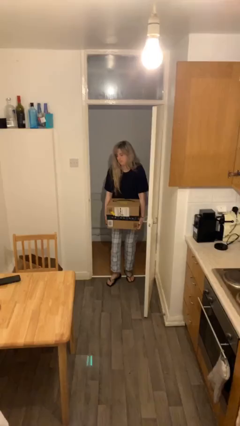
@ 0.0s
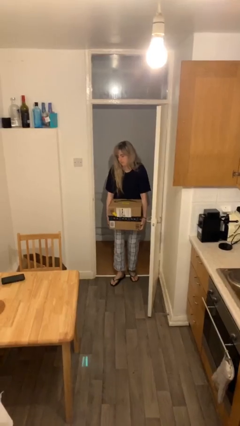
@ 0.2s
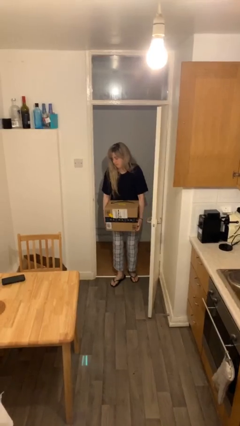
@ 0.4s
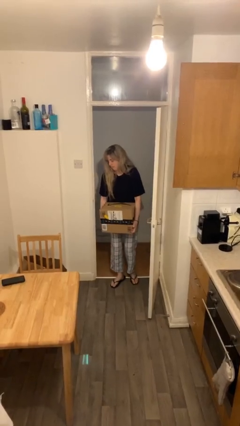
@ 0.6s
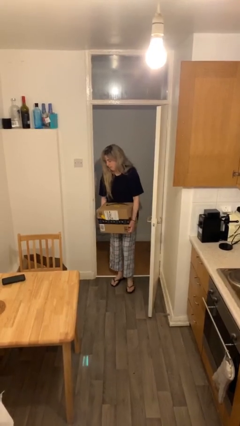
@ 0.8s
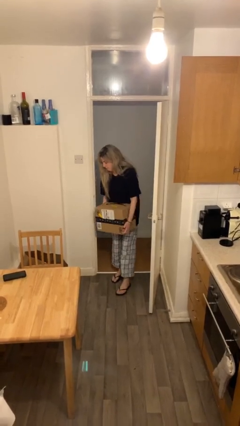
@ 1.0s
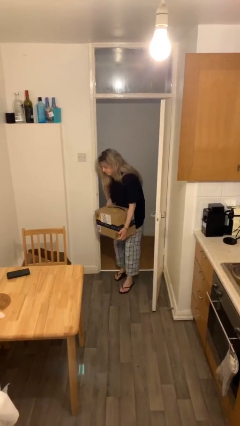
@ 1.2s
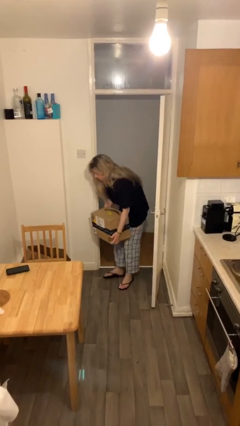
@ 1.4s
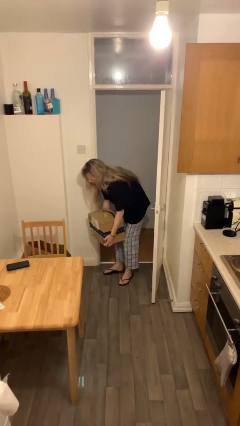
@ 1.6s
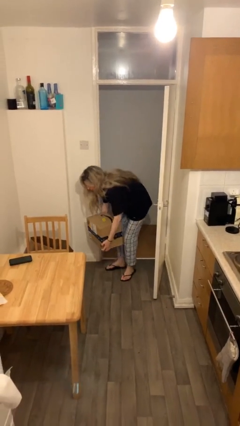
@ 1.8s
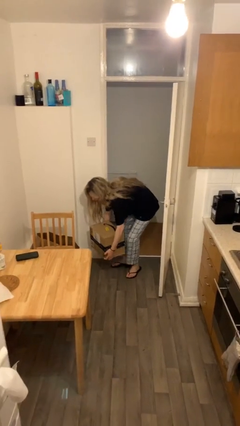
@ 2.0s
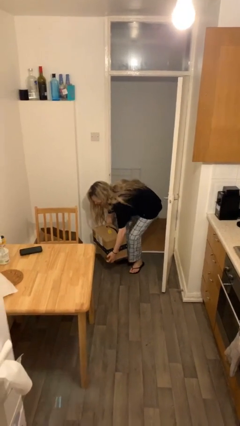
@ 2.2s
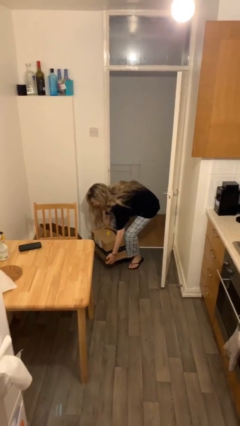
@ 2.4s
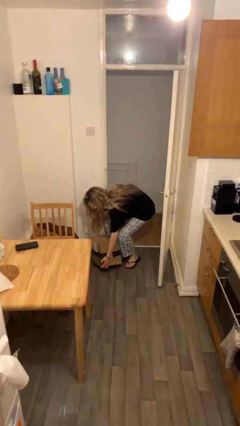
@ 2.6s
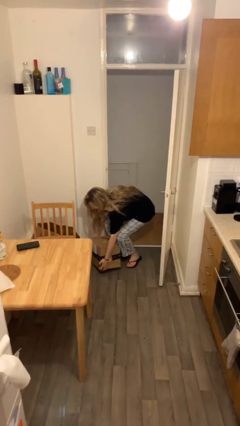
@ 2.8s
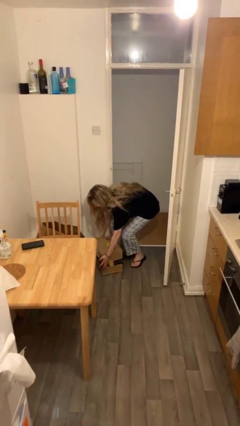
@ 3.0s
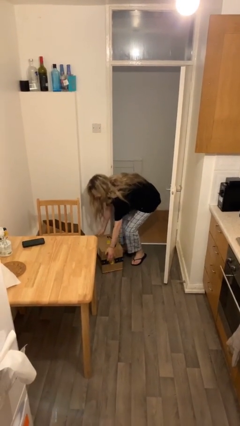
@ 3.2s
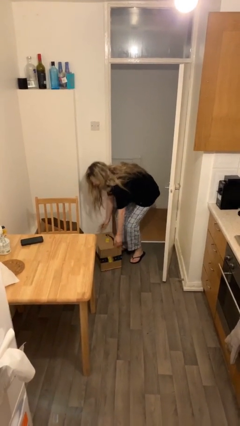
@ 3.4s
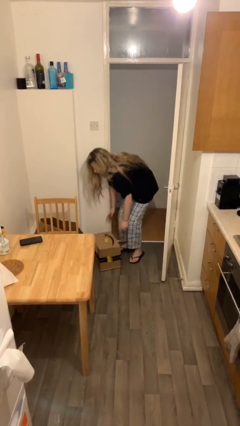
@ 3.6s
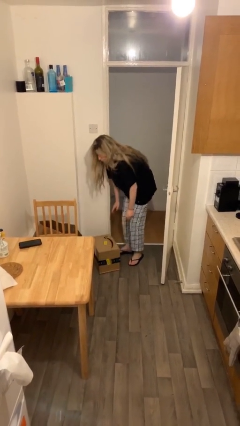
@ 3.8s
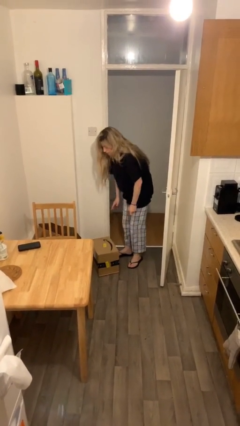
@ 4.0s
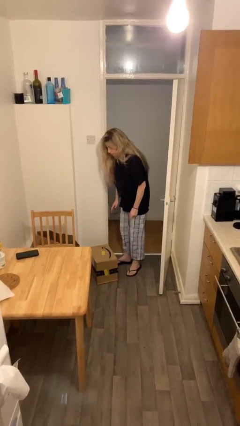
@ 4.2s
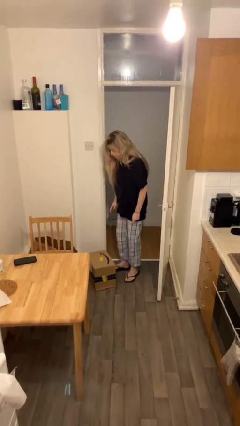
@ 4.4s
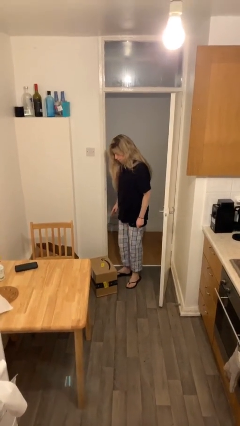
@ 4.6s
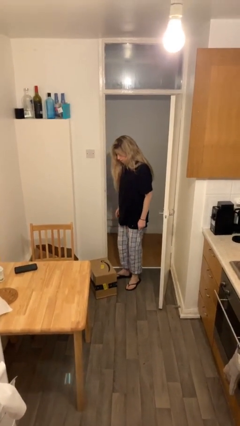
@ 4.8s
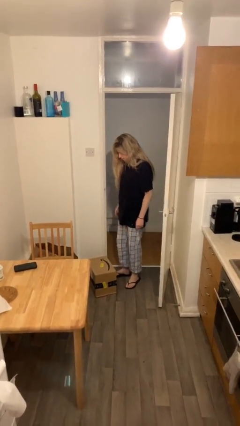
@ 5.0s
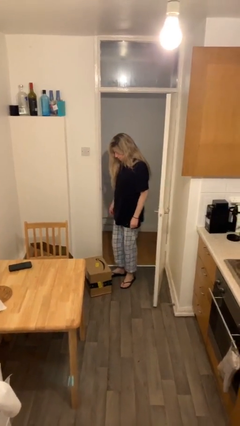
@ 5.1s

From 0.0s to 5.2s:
person puts down object on floor

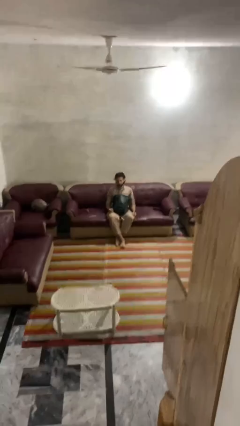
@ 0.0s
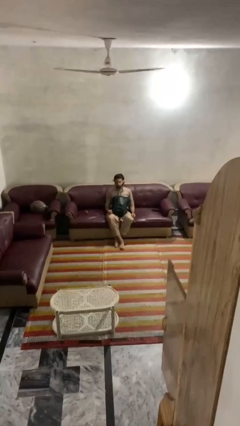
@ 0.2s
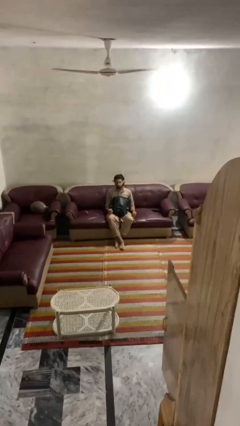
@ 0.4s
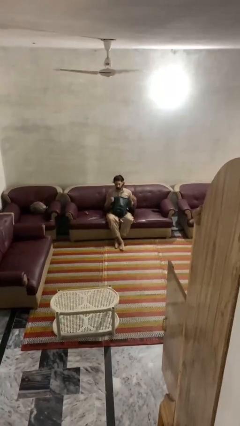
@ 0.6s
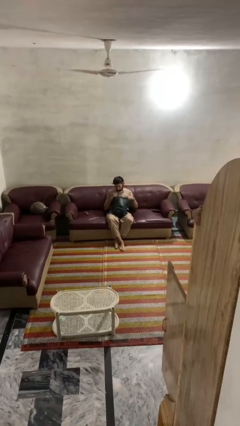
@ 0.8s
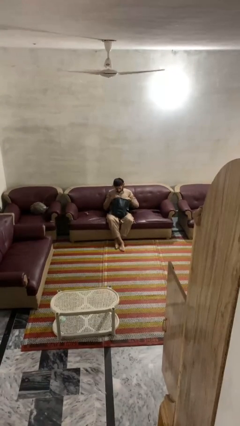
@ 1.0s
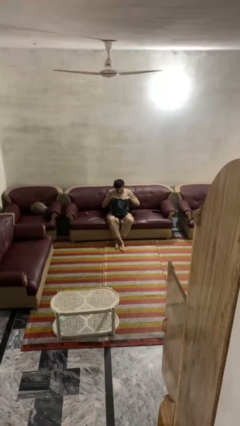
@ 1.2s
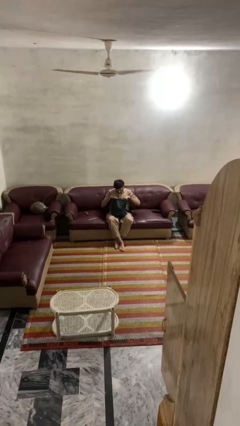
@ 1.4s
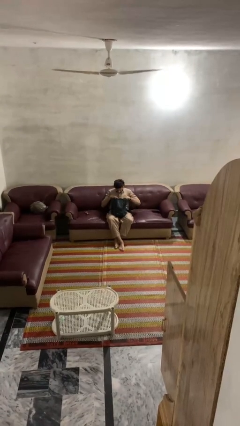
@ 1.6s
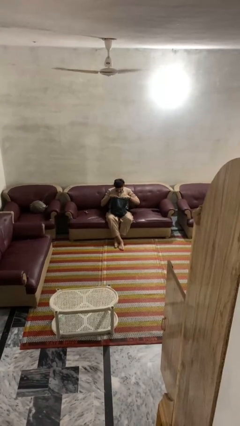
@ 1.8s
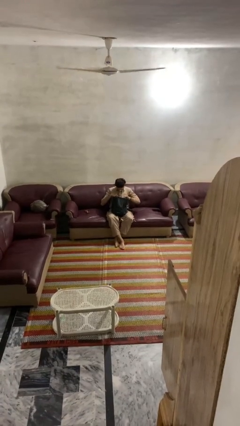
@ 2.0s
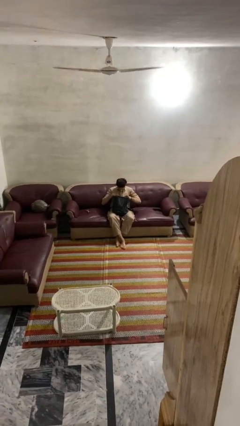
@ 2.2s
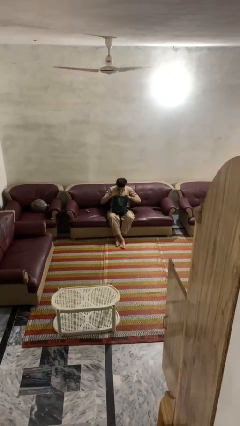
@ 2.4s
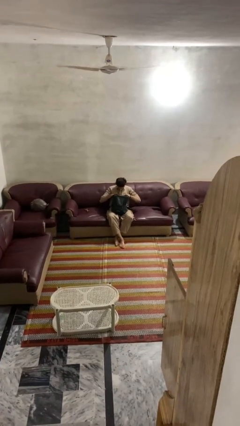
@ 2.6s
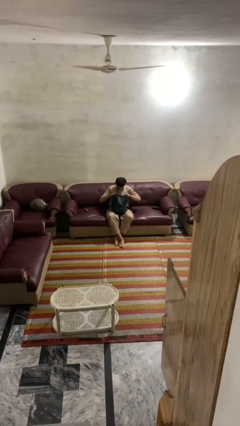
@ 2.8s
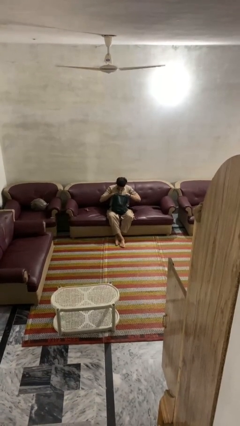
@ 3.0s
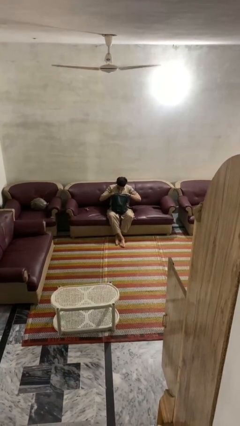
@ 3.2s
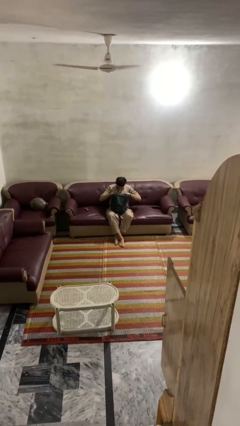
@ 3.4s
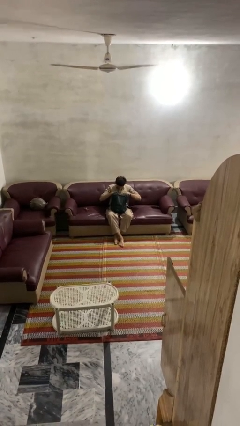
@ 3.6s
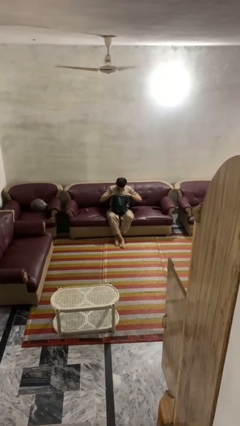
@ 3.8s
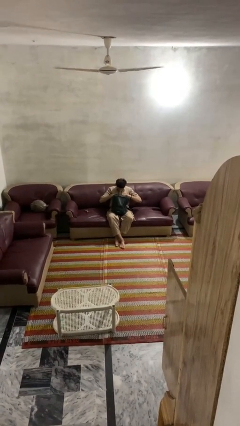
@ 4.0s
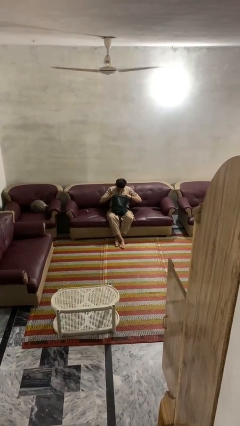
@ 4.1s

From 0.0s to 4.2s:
person searches in backpack

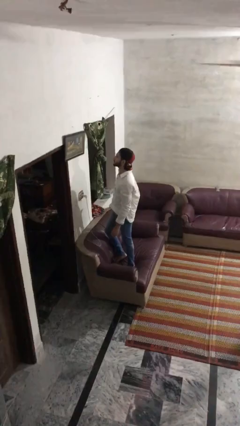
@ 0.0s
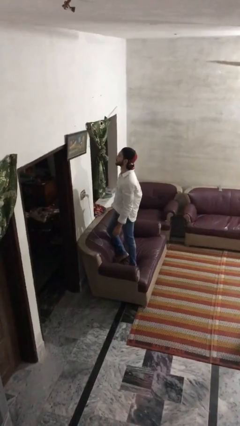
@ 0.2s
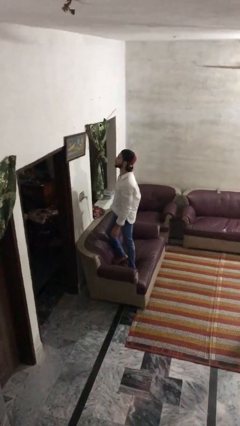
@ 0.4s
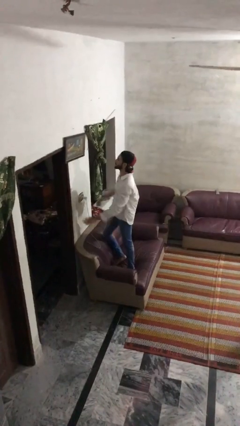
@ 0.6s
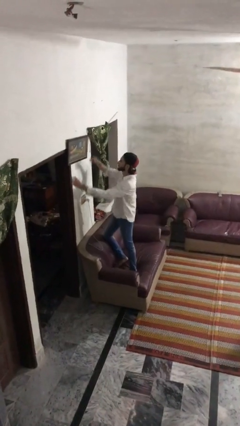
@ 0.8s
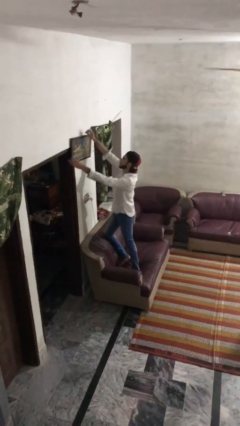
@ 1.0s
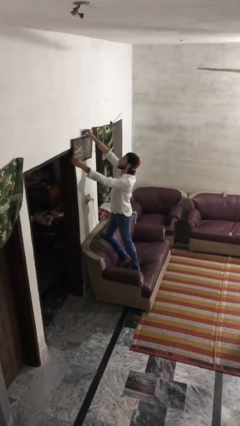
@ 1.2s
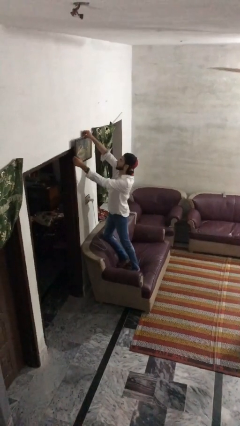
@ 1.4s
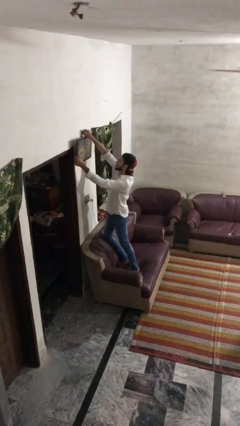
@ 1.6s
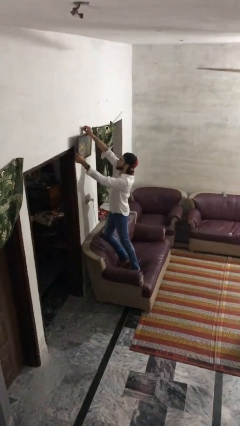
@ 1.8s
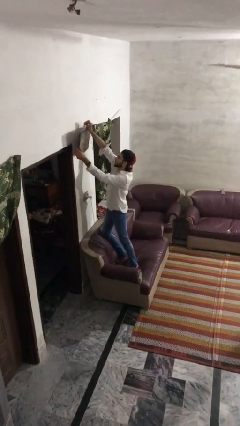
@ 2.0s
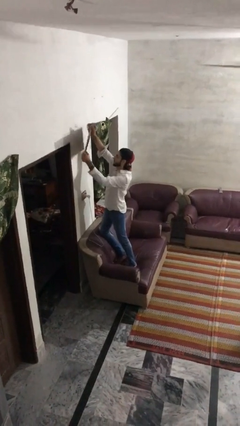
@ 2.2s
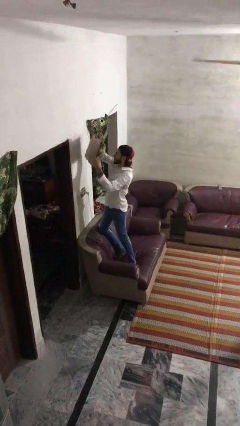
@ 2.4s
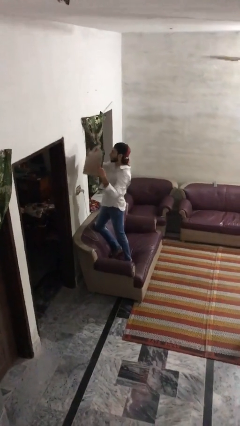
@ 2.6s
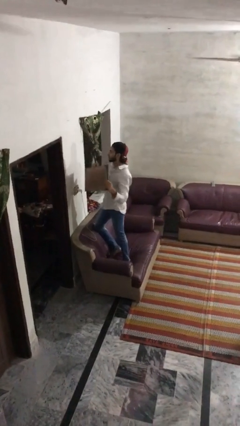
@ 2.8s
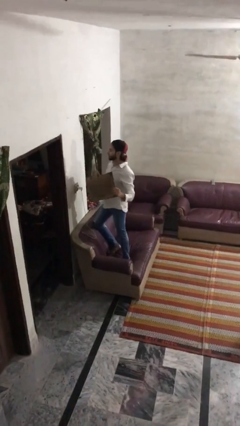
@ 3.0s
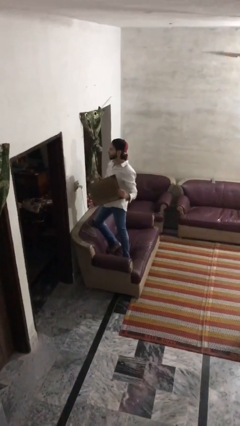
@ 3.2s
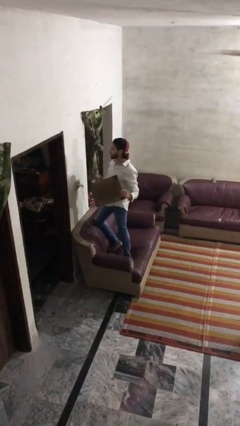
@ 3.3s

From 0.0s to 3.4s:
person takes down picture frame

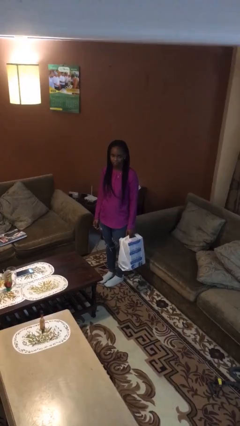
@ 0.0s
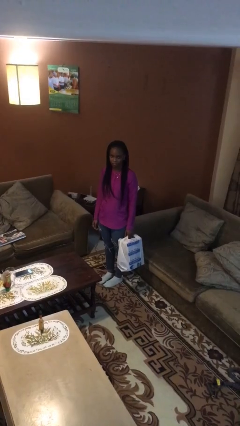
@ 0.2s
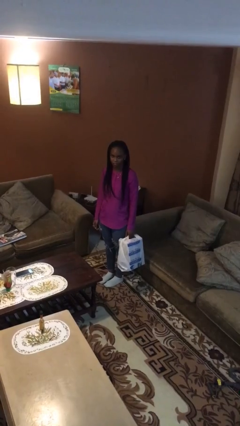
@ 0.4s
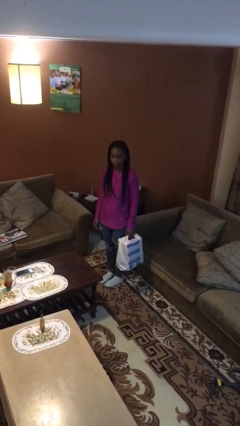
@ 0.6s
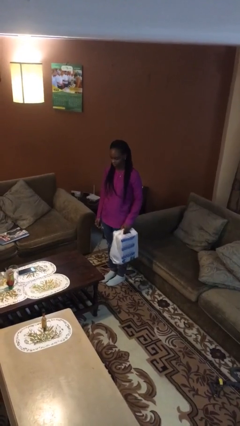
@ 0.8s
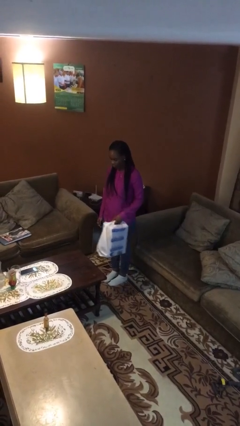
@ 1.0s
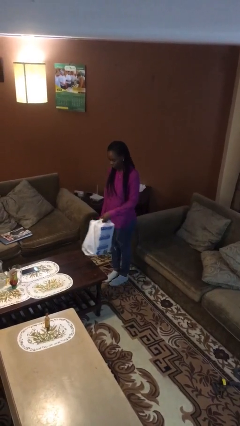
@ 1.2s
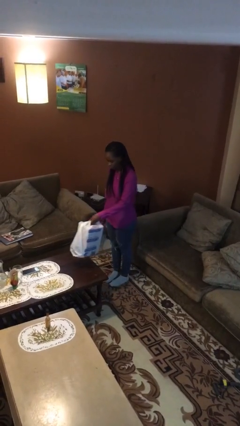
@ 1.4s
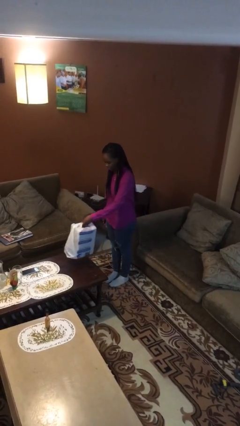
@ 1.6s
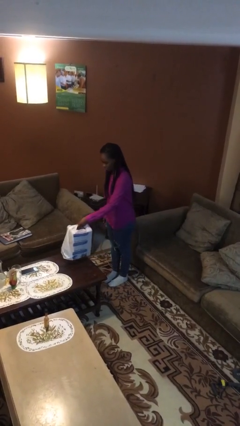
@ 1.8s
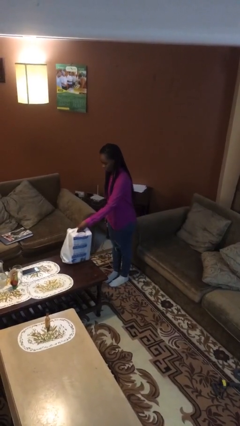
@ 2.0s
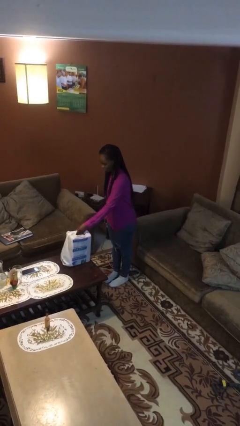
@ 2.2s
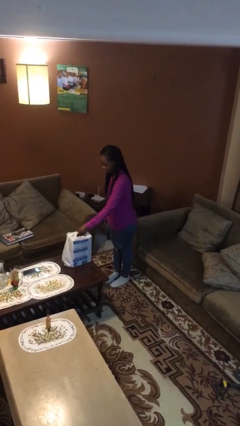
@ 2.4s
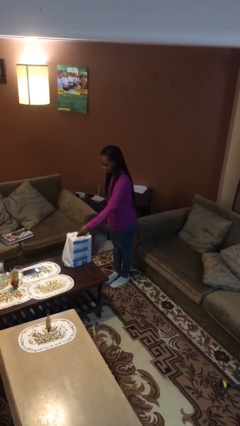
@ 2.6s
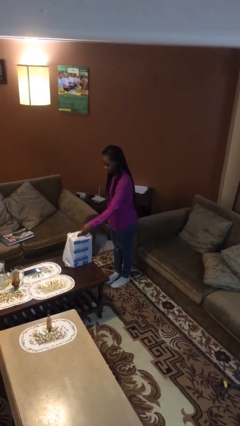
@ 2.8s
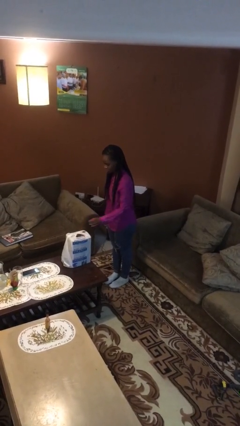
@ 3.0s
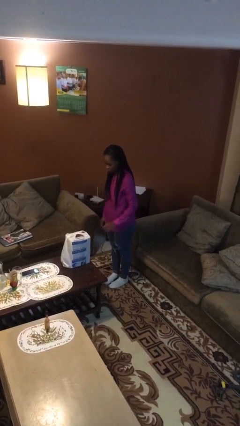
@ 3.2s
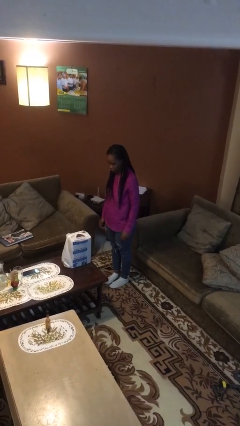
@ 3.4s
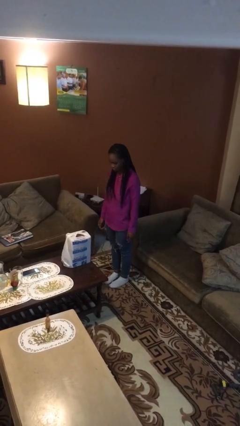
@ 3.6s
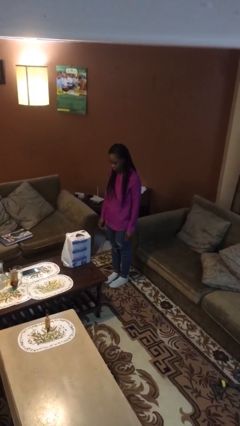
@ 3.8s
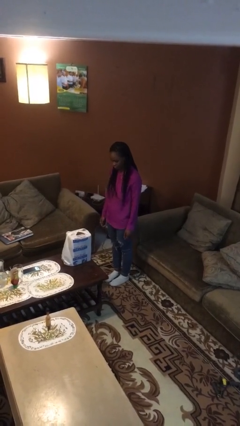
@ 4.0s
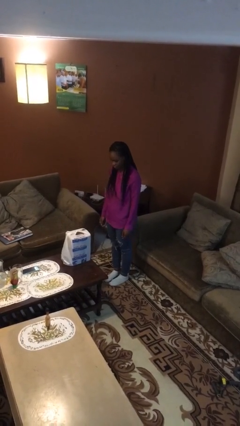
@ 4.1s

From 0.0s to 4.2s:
person puts down object on table

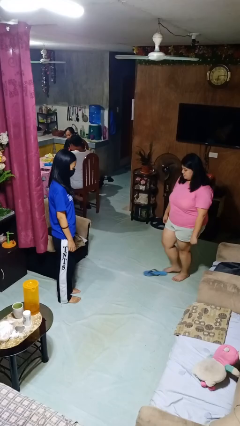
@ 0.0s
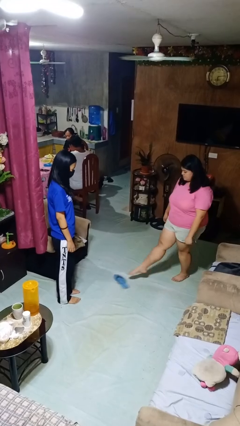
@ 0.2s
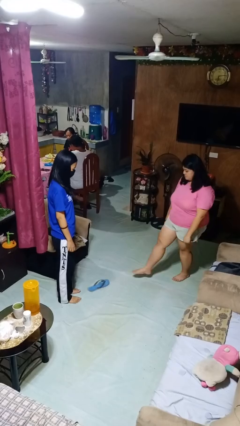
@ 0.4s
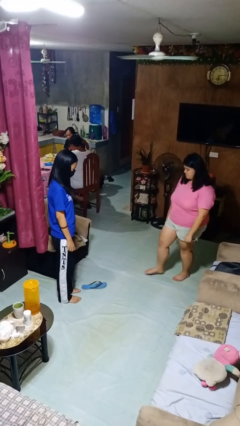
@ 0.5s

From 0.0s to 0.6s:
person kicks object to person
